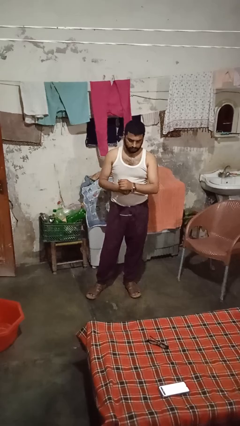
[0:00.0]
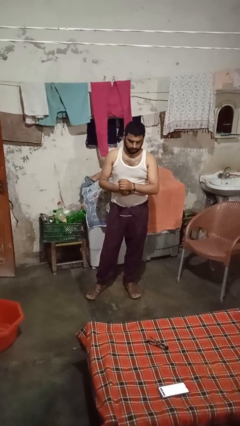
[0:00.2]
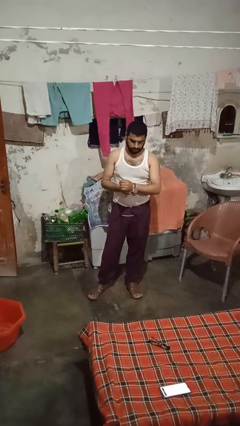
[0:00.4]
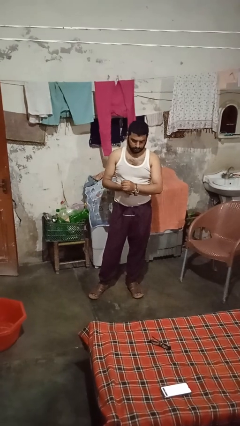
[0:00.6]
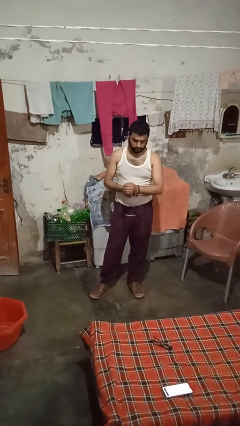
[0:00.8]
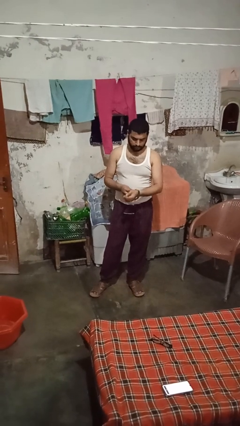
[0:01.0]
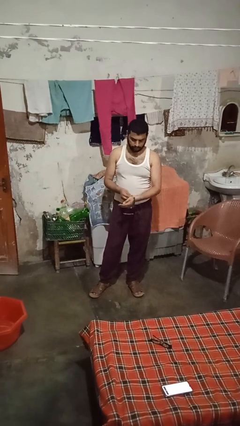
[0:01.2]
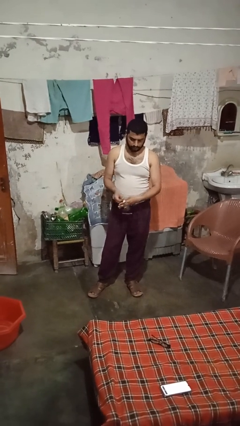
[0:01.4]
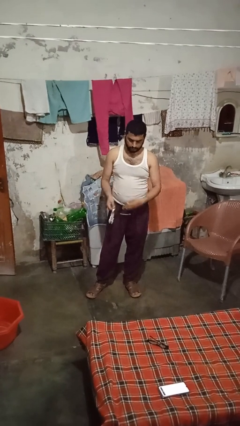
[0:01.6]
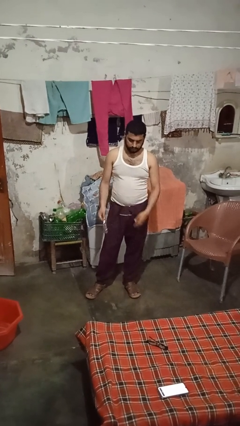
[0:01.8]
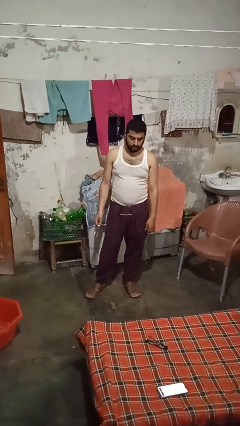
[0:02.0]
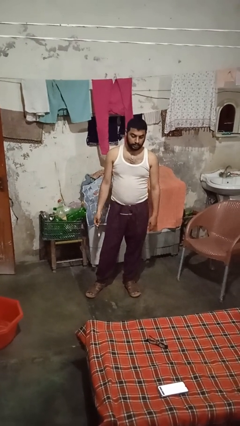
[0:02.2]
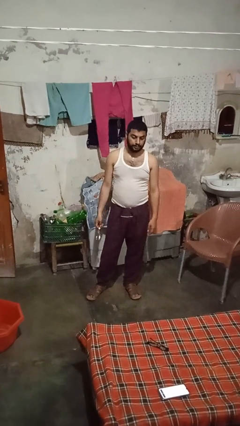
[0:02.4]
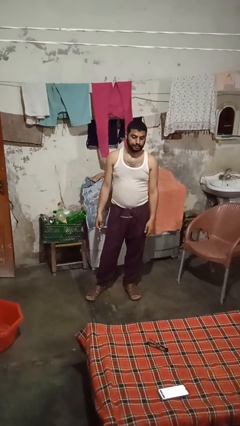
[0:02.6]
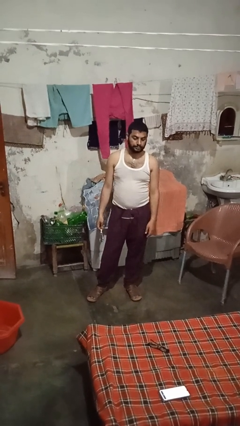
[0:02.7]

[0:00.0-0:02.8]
person takes off wristwatch

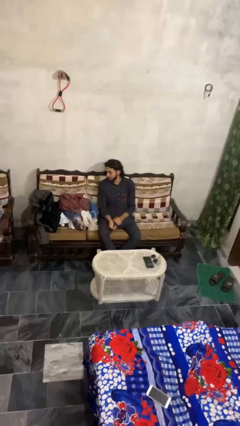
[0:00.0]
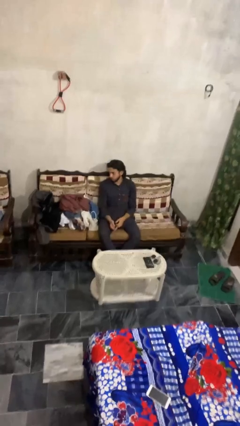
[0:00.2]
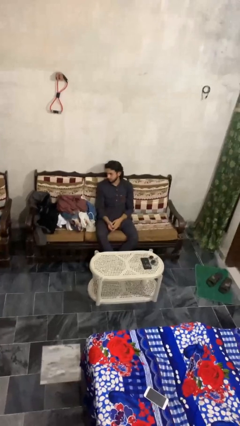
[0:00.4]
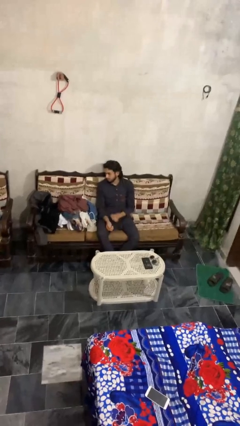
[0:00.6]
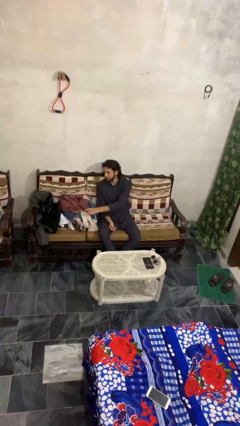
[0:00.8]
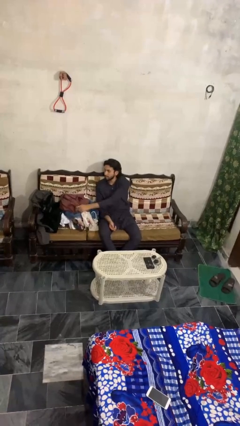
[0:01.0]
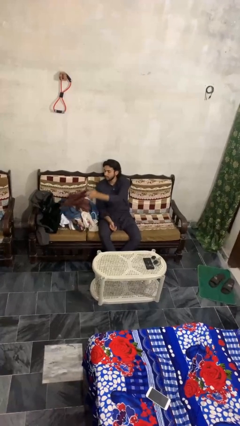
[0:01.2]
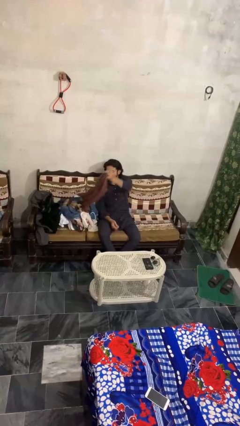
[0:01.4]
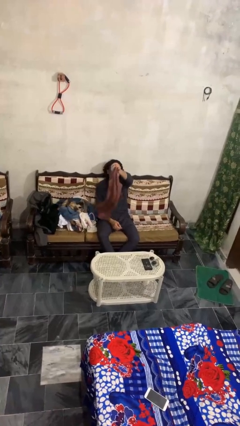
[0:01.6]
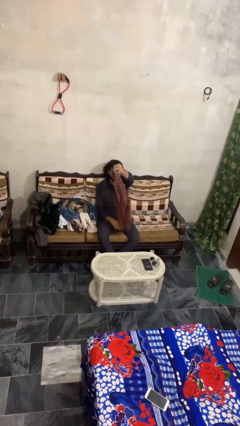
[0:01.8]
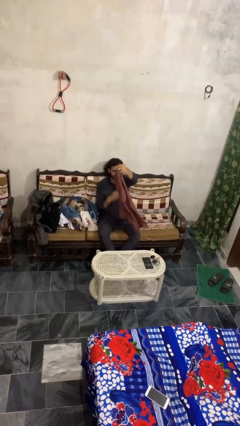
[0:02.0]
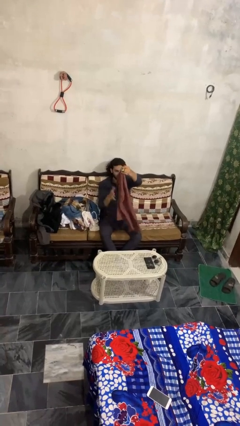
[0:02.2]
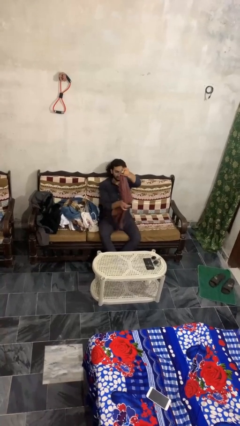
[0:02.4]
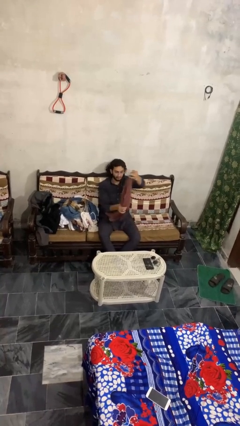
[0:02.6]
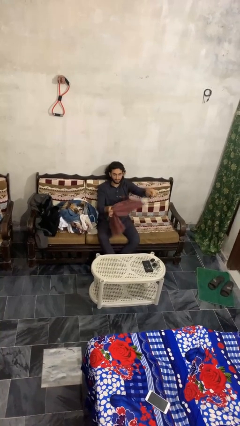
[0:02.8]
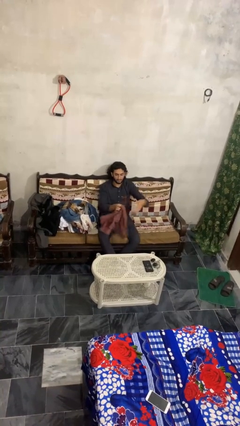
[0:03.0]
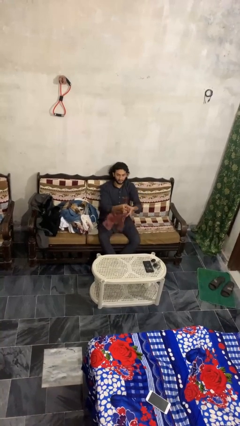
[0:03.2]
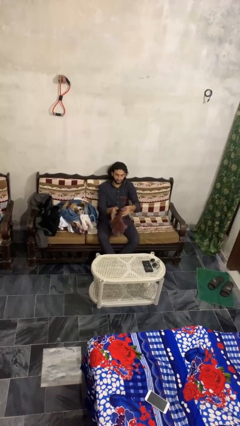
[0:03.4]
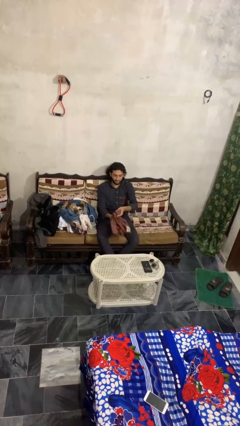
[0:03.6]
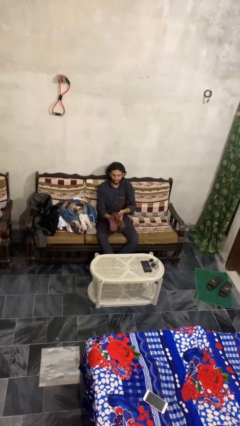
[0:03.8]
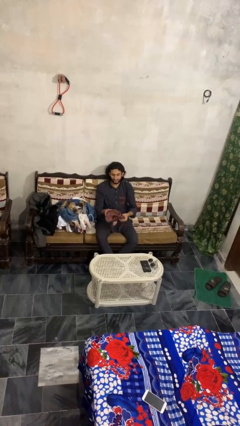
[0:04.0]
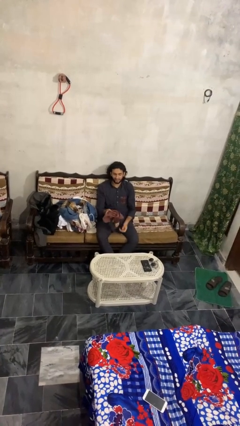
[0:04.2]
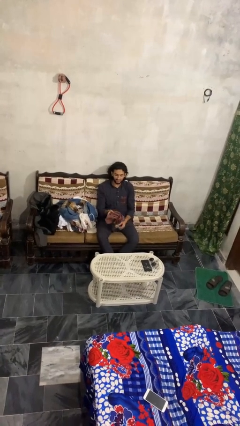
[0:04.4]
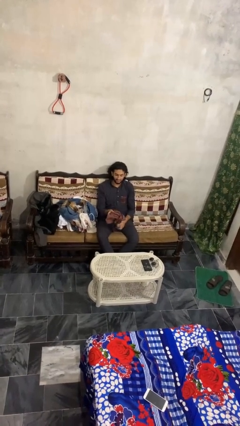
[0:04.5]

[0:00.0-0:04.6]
person folds shirt

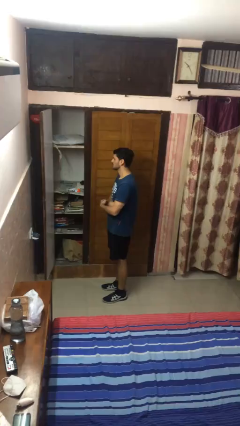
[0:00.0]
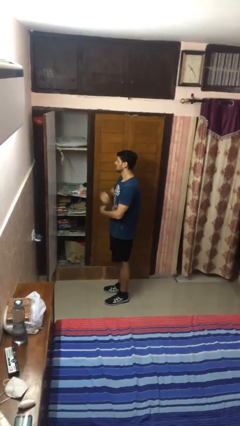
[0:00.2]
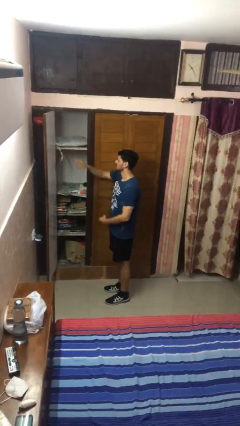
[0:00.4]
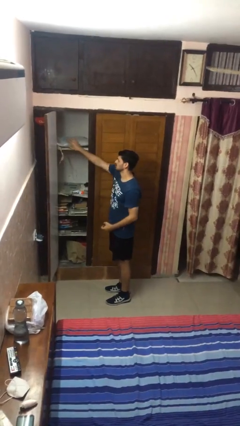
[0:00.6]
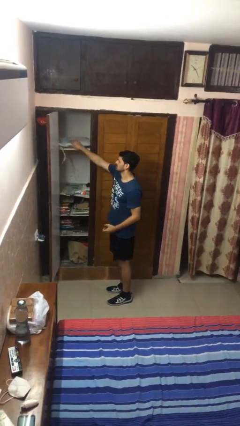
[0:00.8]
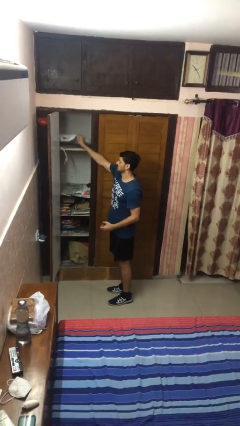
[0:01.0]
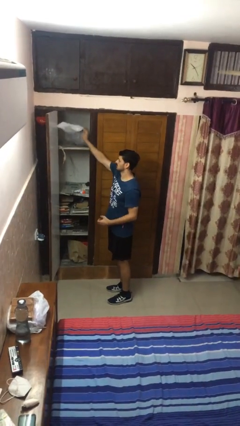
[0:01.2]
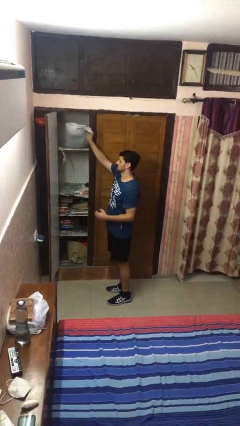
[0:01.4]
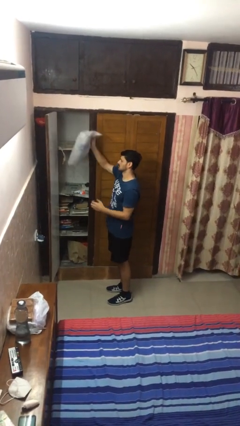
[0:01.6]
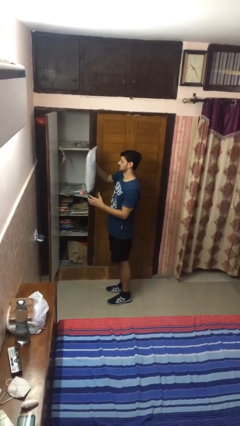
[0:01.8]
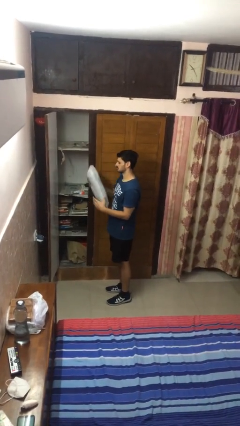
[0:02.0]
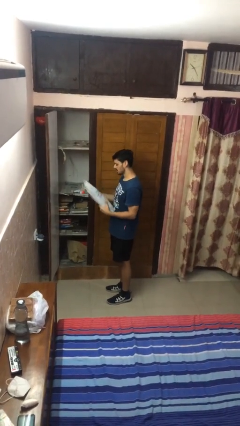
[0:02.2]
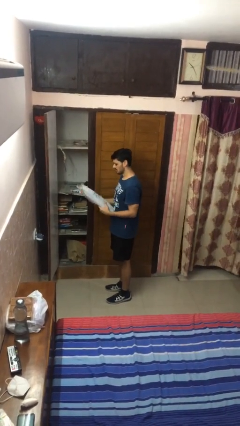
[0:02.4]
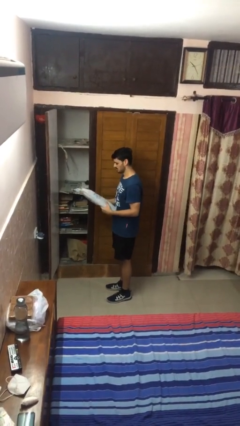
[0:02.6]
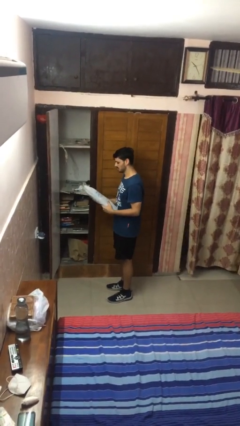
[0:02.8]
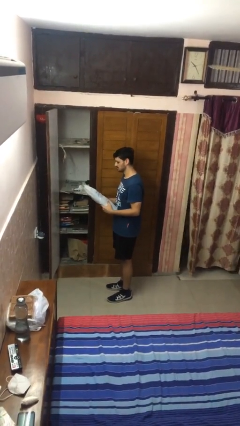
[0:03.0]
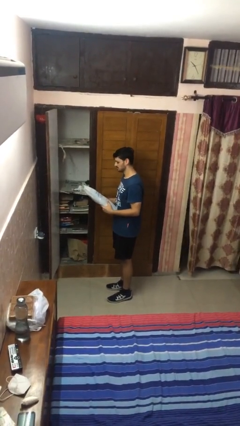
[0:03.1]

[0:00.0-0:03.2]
person picks up object from shelf

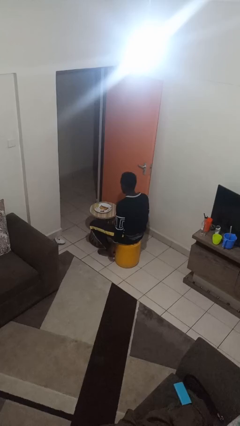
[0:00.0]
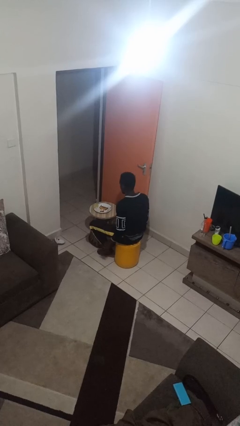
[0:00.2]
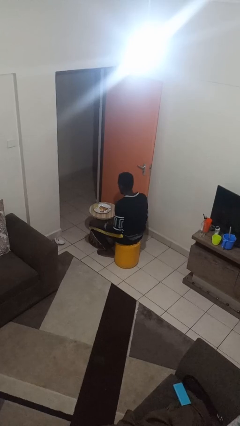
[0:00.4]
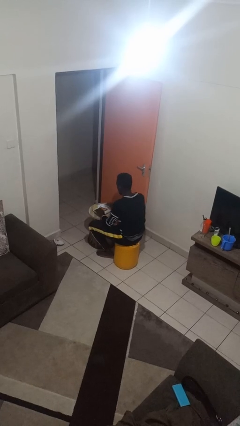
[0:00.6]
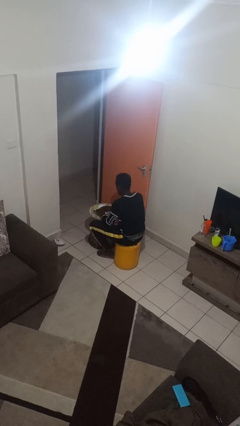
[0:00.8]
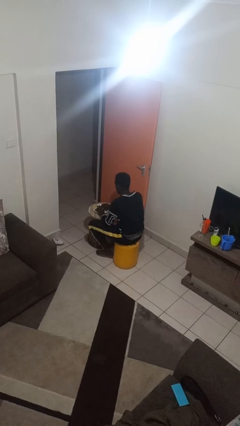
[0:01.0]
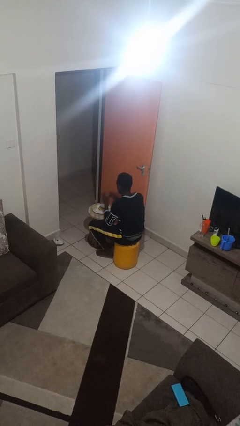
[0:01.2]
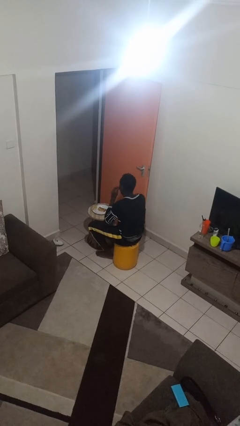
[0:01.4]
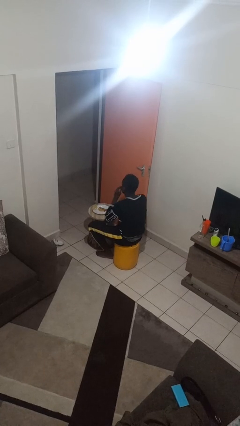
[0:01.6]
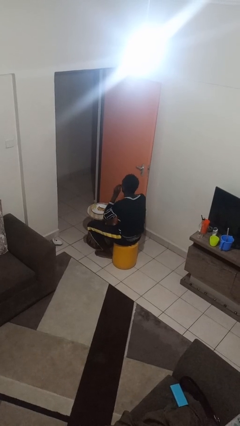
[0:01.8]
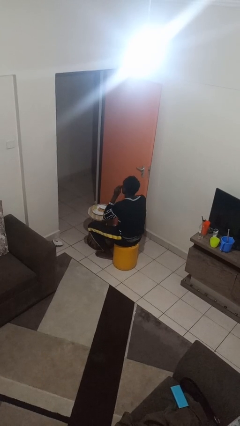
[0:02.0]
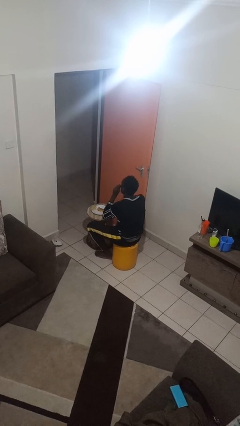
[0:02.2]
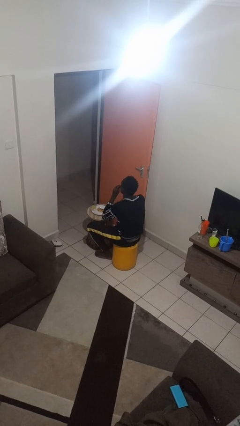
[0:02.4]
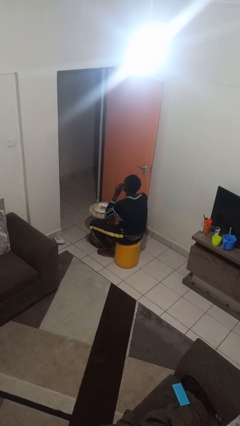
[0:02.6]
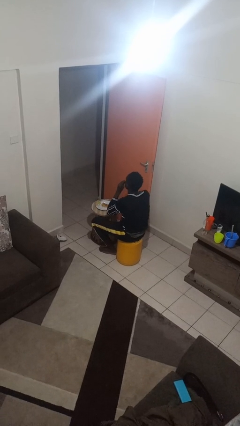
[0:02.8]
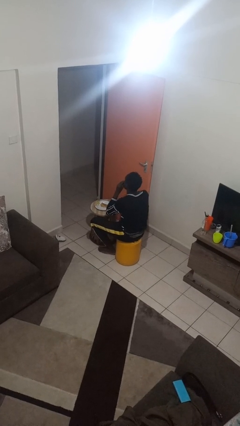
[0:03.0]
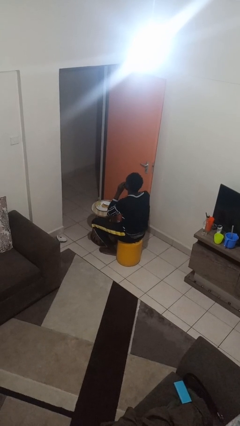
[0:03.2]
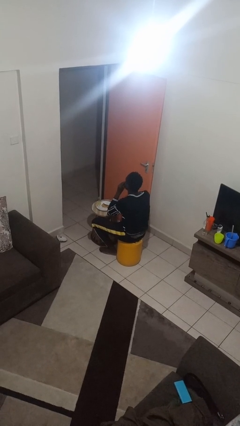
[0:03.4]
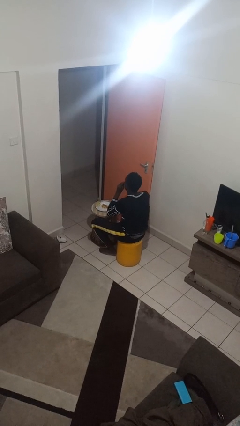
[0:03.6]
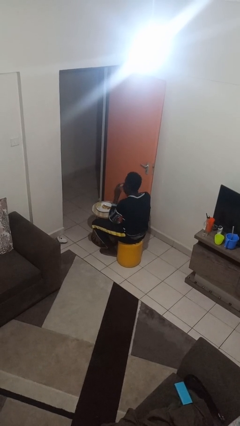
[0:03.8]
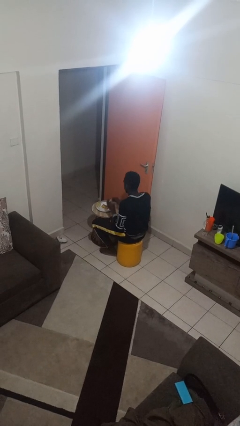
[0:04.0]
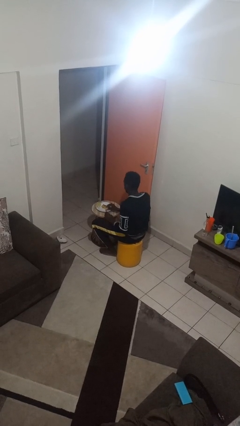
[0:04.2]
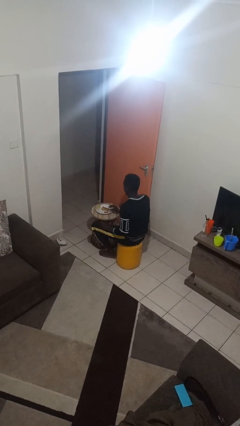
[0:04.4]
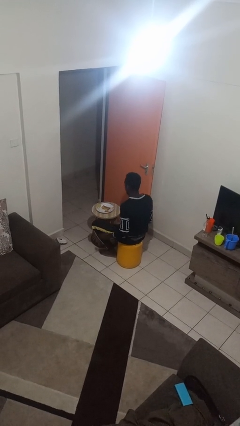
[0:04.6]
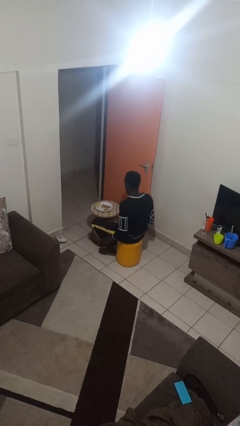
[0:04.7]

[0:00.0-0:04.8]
person eats with hands

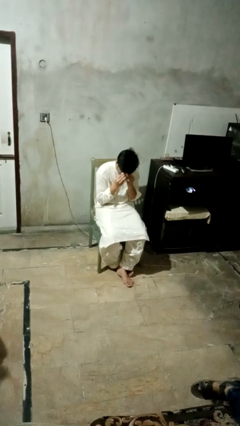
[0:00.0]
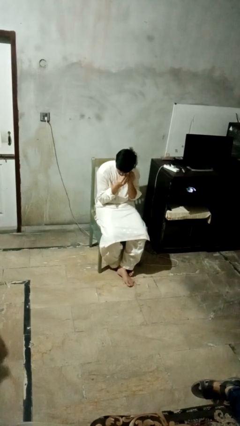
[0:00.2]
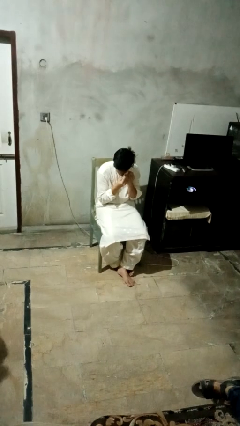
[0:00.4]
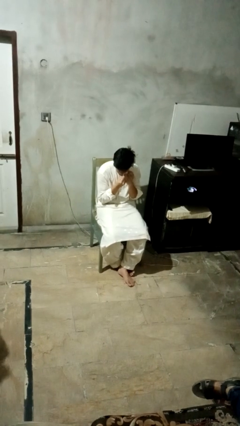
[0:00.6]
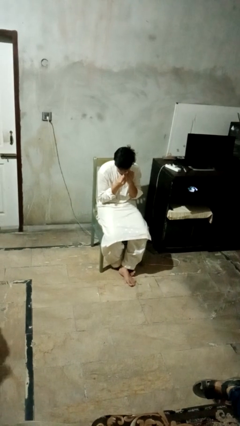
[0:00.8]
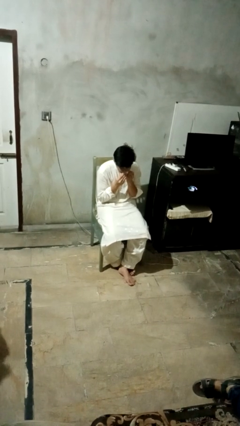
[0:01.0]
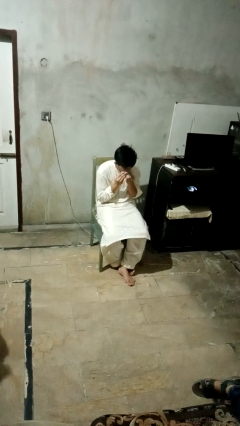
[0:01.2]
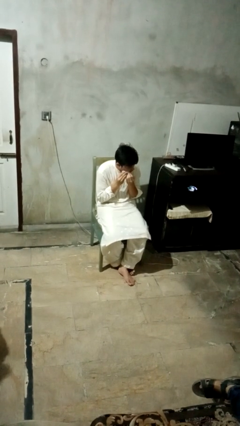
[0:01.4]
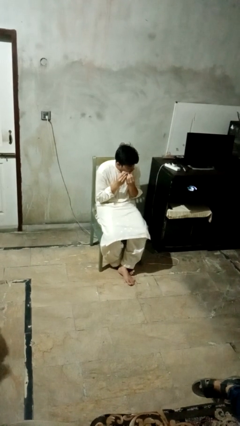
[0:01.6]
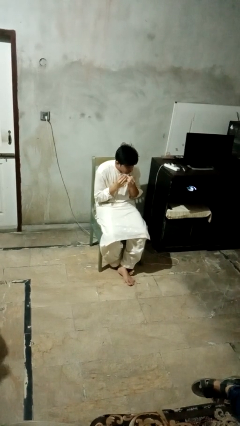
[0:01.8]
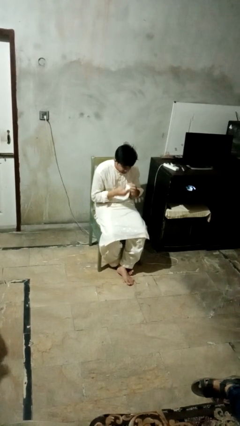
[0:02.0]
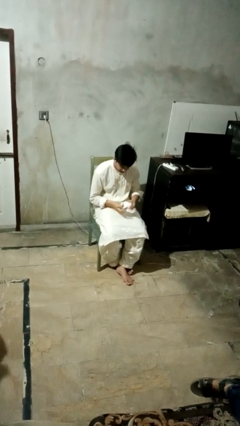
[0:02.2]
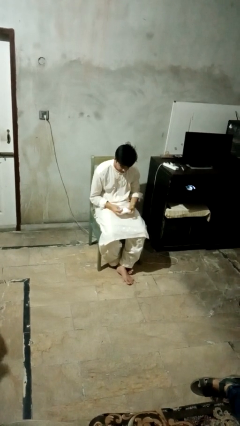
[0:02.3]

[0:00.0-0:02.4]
person wipes mouth with napkin

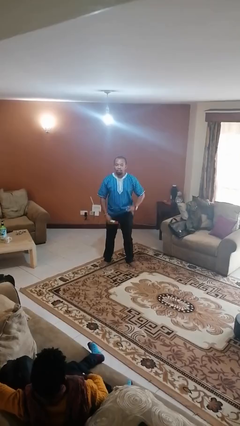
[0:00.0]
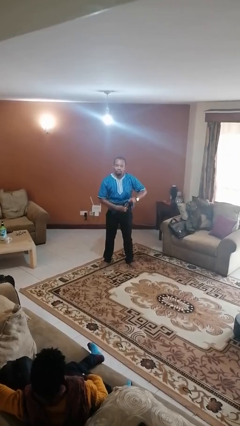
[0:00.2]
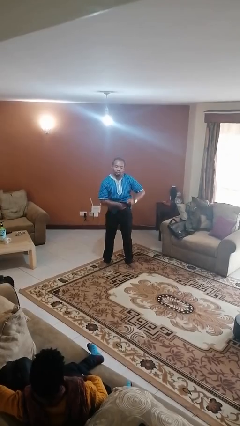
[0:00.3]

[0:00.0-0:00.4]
person applies deodorant
